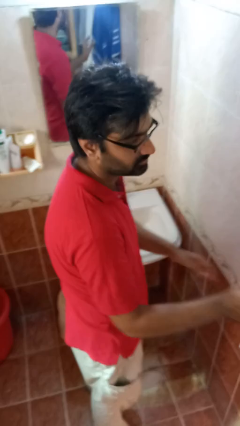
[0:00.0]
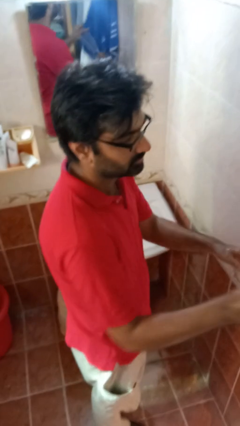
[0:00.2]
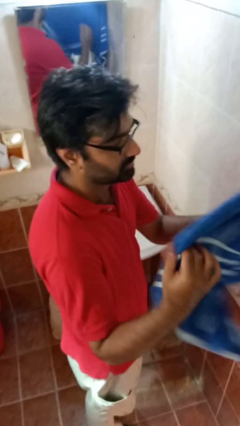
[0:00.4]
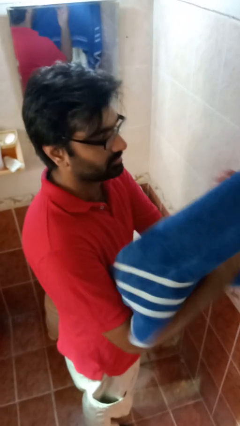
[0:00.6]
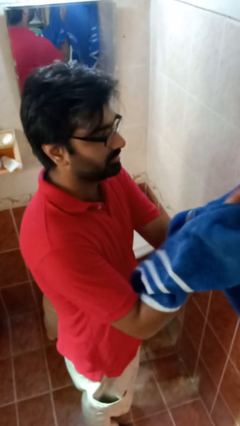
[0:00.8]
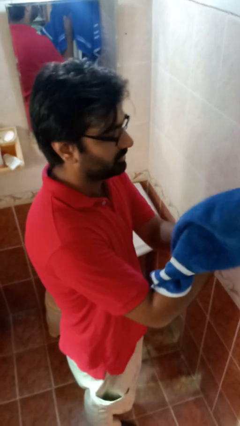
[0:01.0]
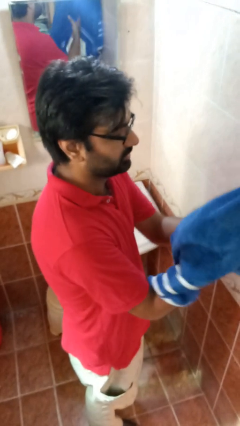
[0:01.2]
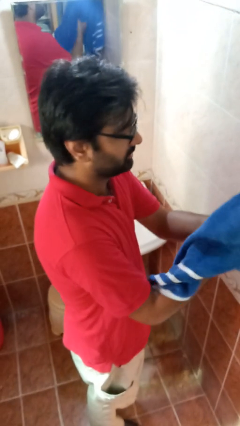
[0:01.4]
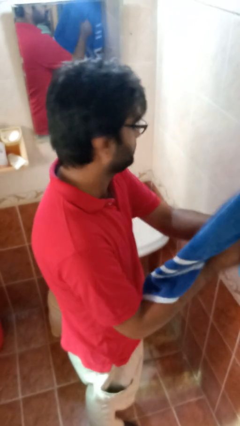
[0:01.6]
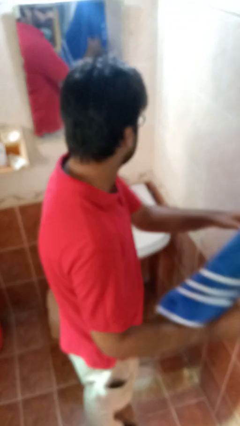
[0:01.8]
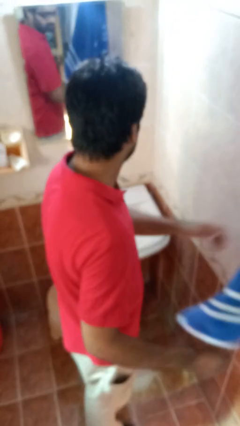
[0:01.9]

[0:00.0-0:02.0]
person dries hands with towel

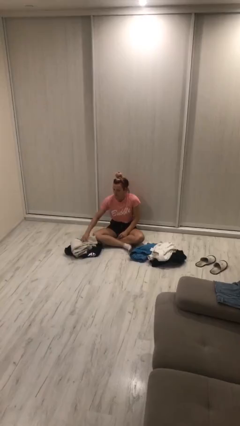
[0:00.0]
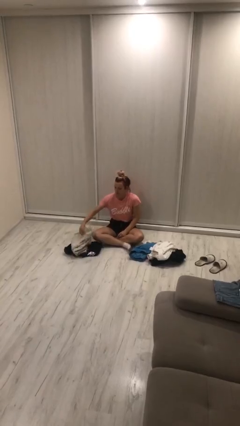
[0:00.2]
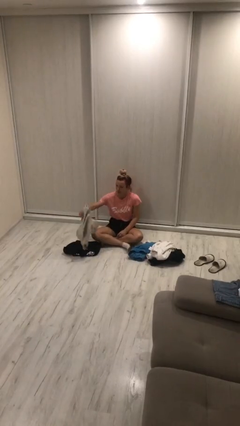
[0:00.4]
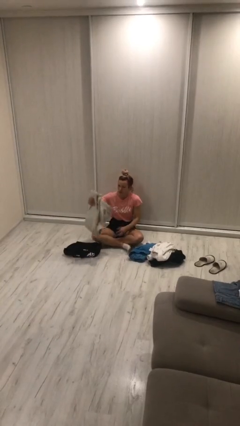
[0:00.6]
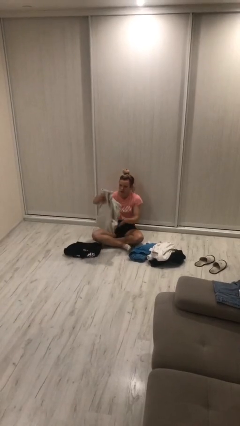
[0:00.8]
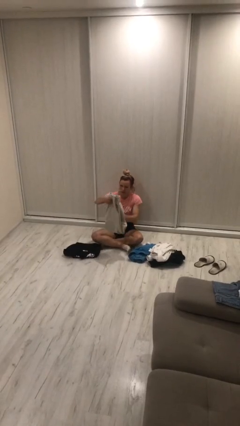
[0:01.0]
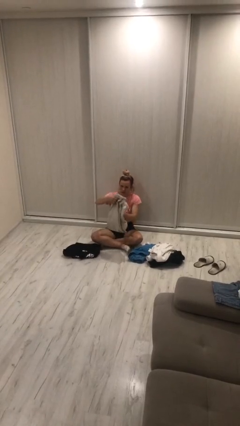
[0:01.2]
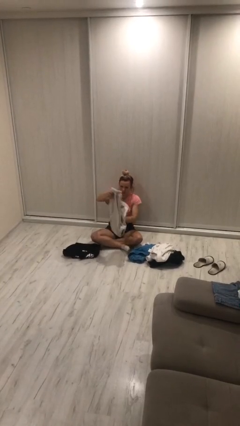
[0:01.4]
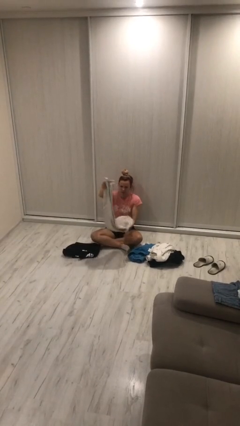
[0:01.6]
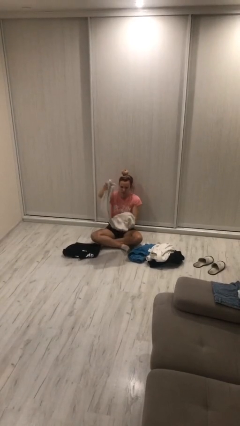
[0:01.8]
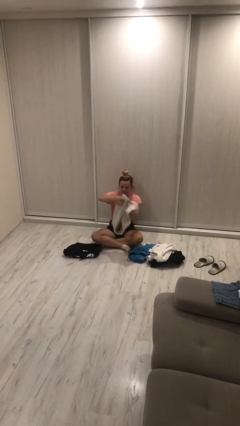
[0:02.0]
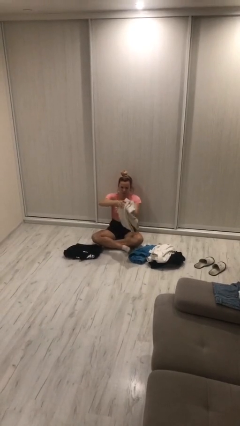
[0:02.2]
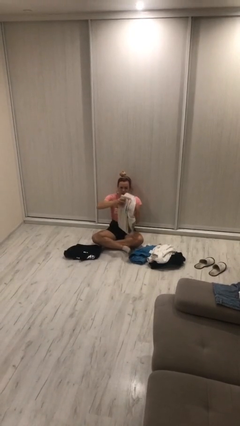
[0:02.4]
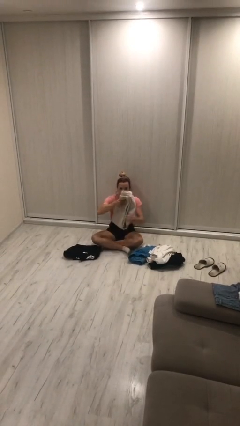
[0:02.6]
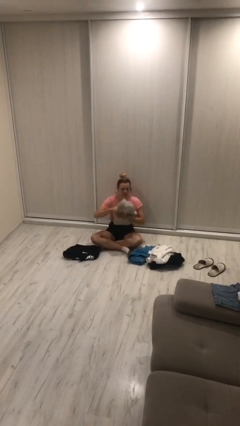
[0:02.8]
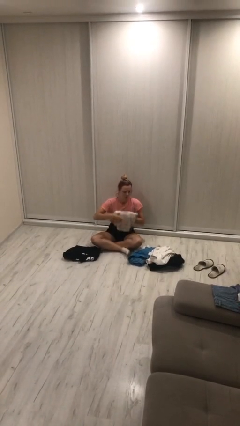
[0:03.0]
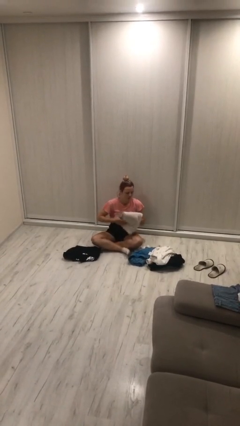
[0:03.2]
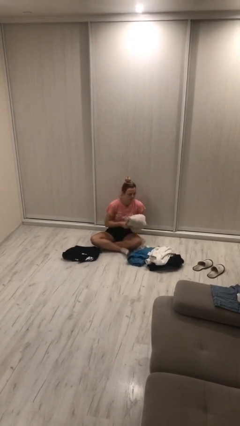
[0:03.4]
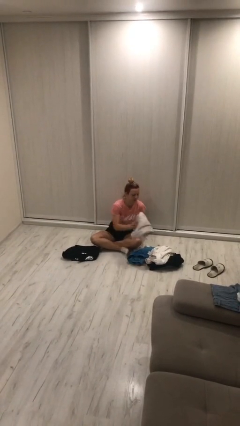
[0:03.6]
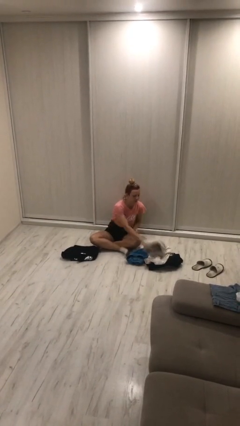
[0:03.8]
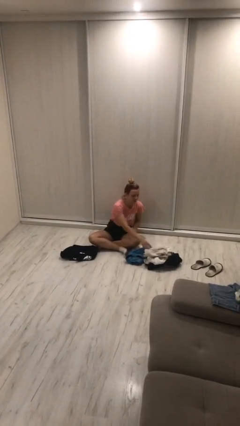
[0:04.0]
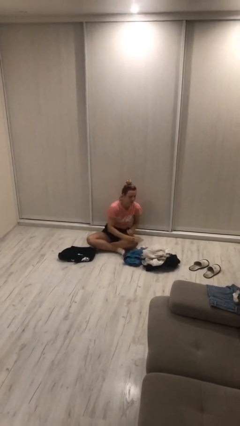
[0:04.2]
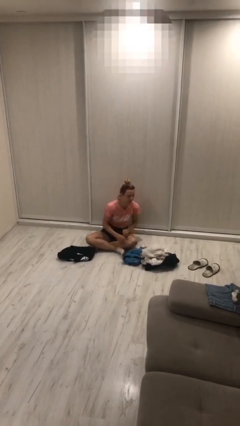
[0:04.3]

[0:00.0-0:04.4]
person folds pants

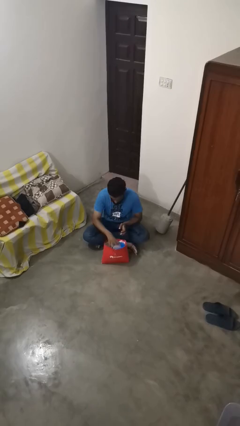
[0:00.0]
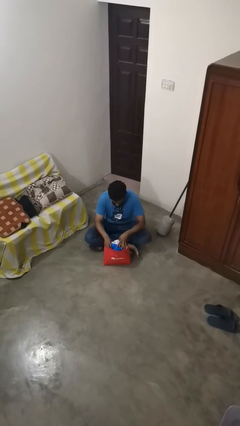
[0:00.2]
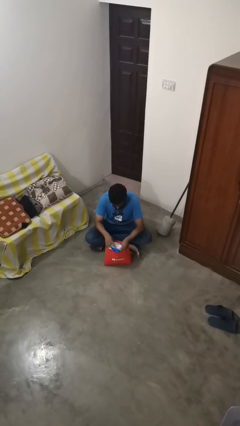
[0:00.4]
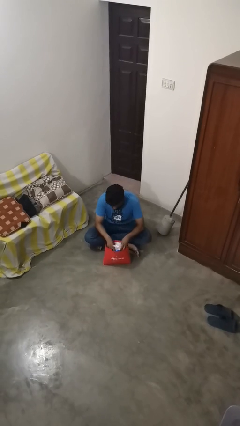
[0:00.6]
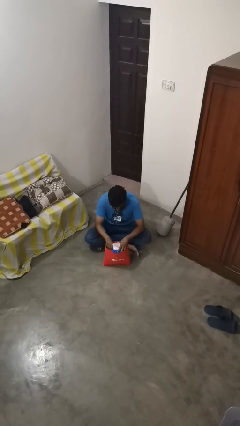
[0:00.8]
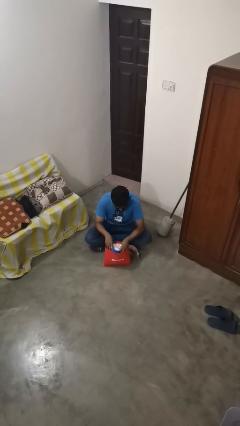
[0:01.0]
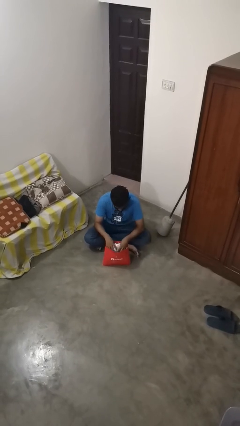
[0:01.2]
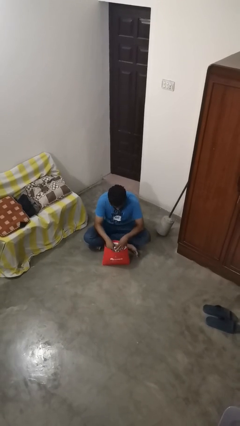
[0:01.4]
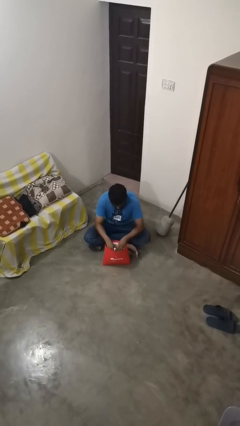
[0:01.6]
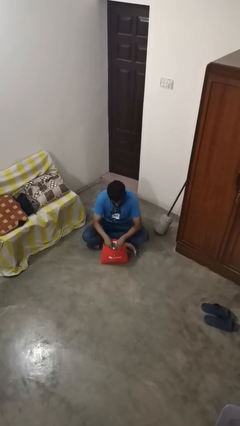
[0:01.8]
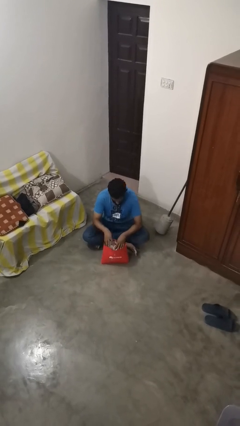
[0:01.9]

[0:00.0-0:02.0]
person searches in bag

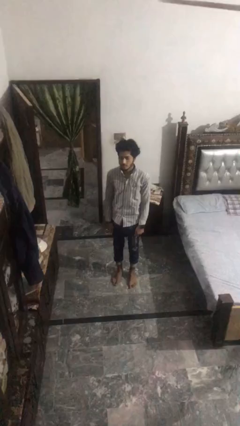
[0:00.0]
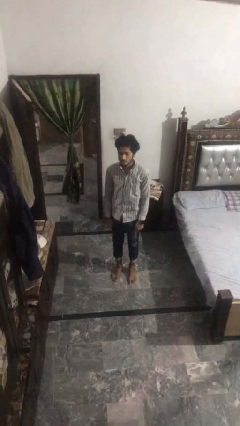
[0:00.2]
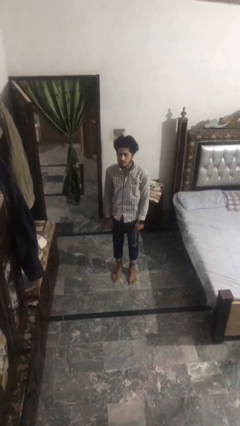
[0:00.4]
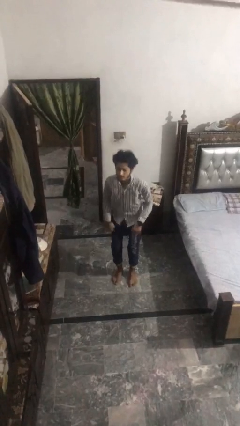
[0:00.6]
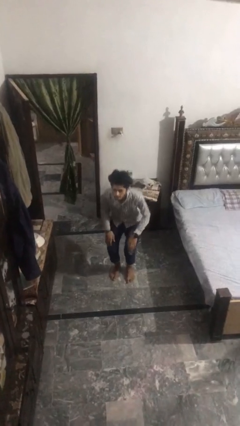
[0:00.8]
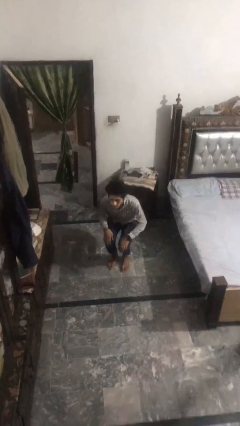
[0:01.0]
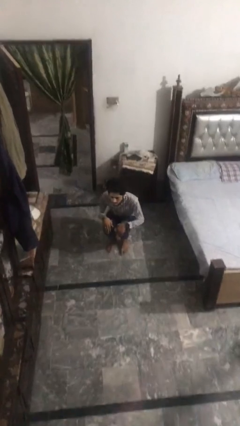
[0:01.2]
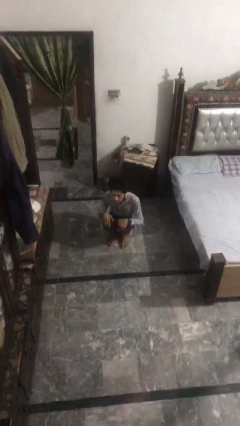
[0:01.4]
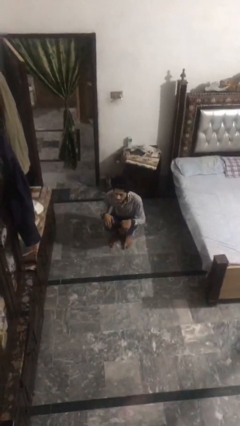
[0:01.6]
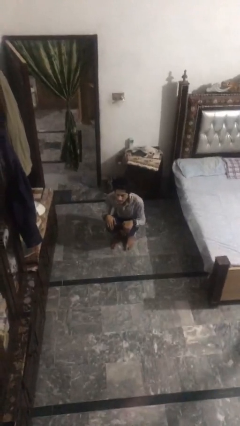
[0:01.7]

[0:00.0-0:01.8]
person squats

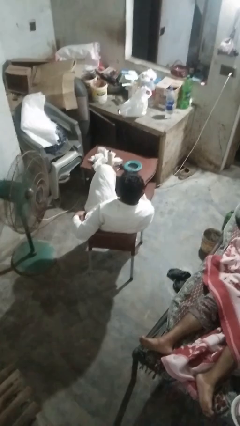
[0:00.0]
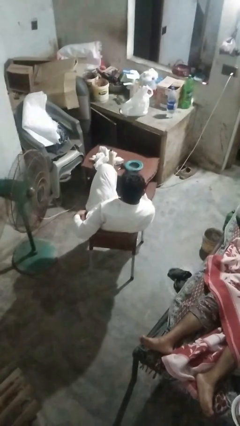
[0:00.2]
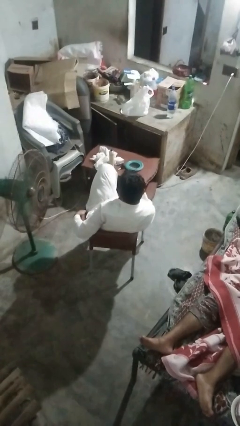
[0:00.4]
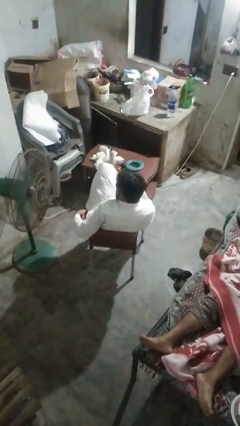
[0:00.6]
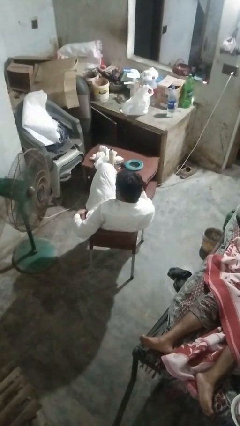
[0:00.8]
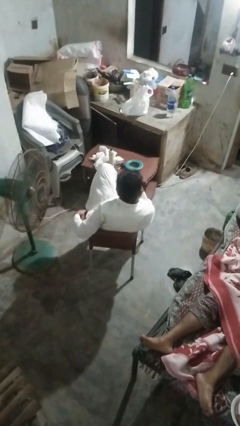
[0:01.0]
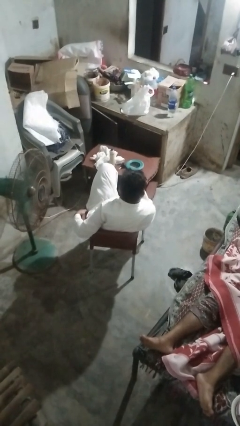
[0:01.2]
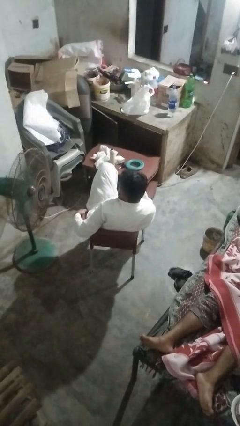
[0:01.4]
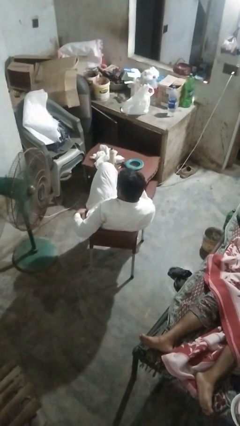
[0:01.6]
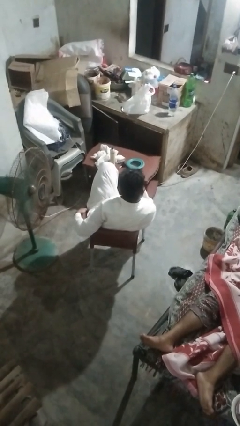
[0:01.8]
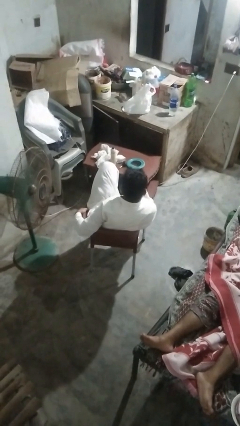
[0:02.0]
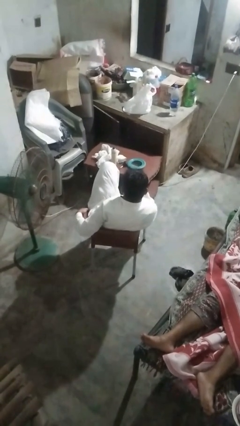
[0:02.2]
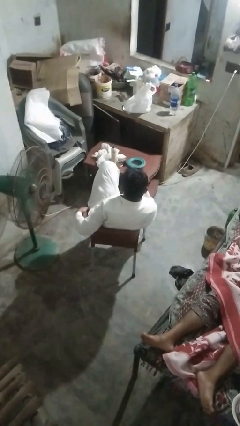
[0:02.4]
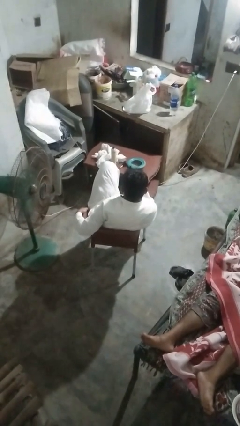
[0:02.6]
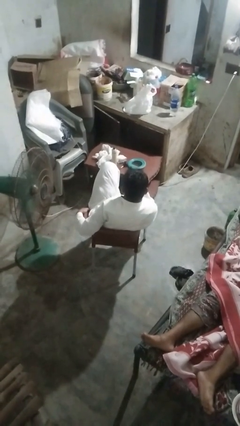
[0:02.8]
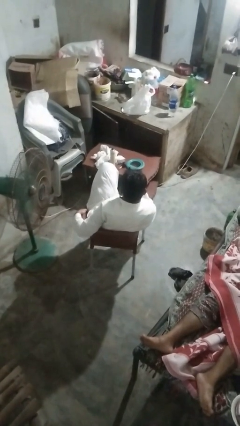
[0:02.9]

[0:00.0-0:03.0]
person shakes head

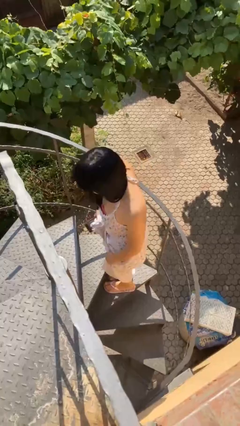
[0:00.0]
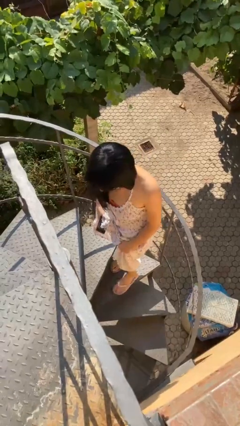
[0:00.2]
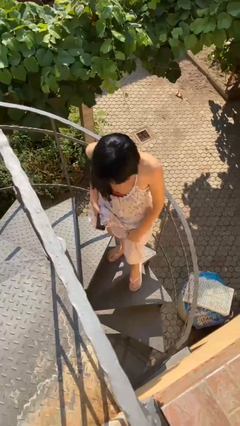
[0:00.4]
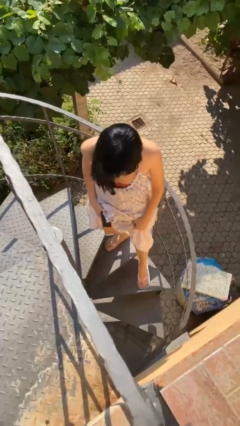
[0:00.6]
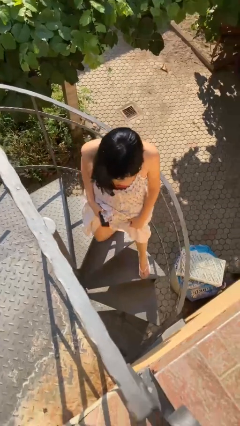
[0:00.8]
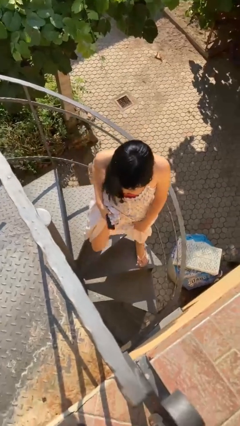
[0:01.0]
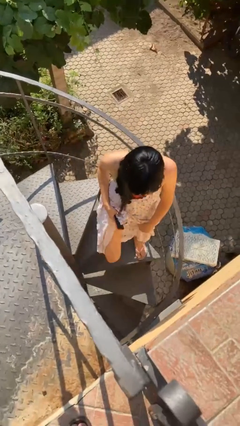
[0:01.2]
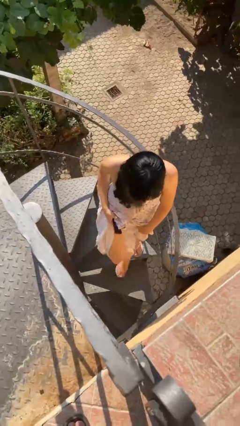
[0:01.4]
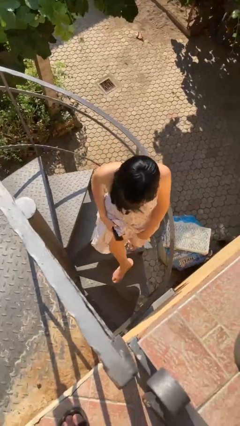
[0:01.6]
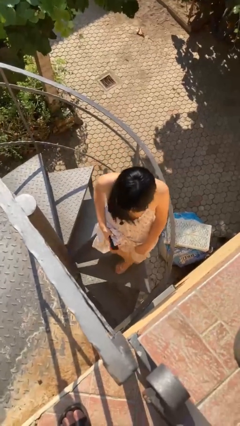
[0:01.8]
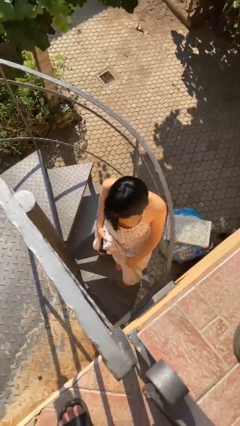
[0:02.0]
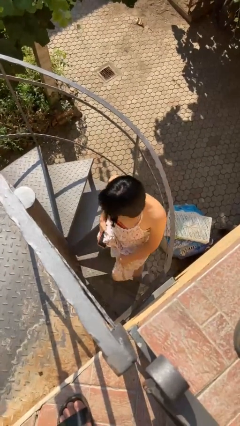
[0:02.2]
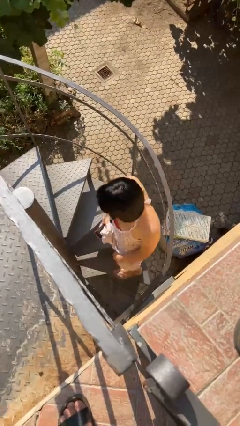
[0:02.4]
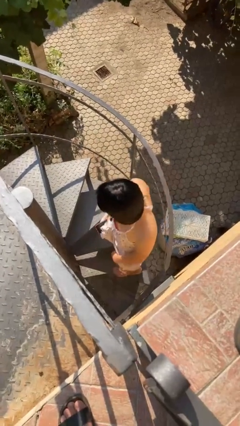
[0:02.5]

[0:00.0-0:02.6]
person climbs down stairs

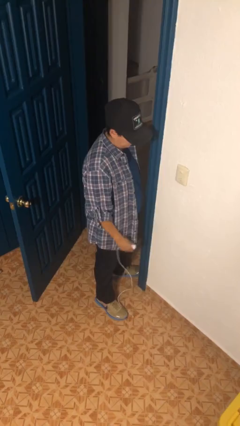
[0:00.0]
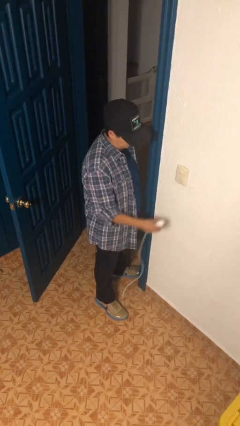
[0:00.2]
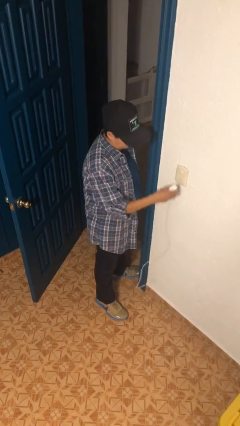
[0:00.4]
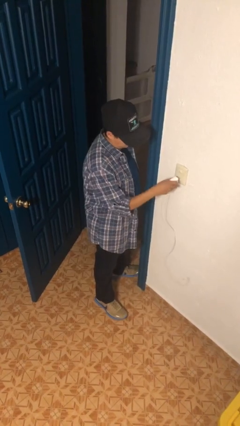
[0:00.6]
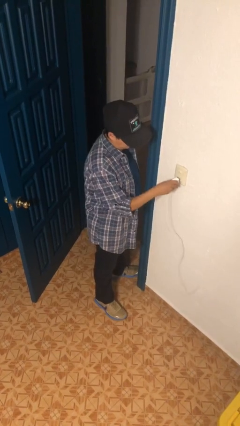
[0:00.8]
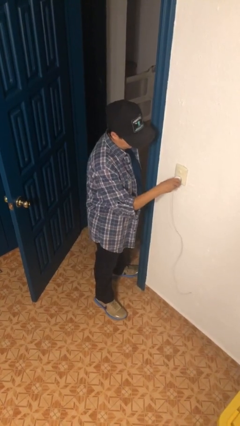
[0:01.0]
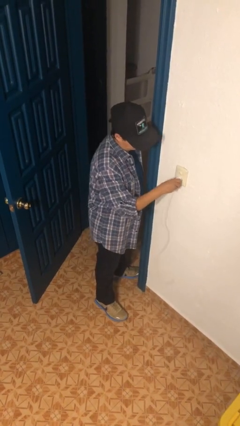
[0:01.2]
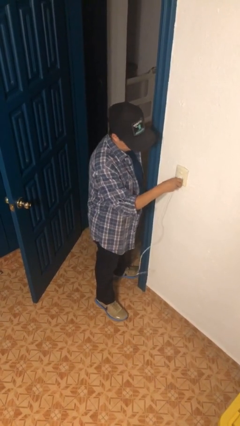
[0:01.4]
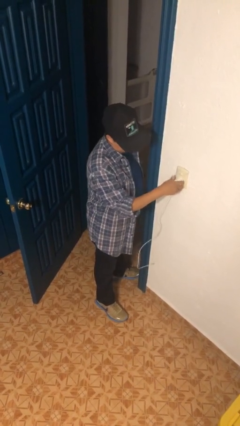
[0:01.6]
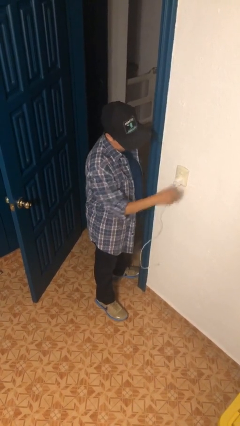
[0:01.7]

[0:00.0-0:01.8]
person plugs into electrical socket
